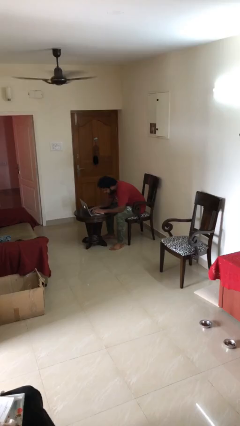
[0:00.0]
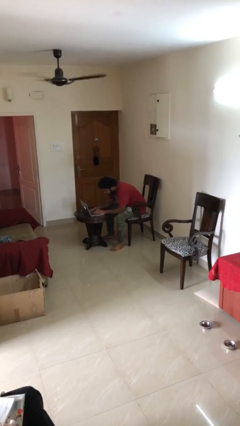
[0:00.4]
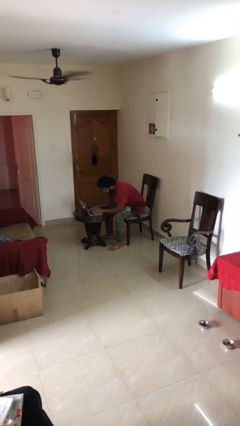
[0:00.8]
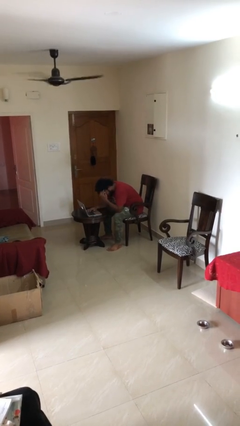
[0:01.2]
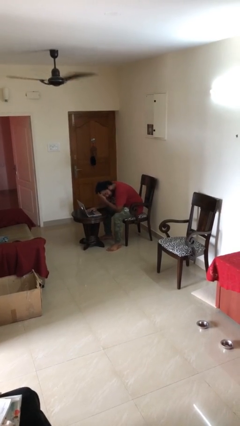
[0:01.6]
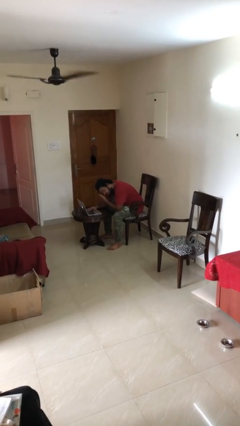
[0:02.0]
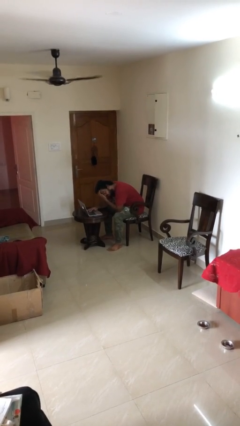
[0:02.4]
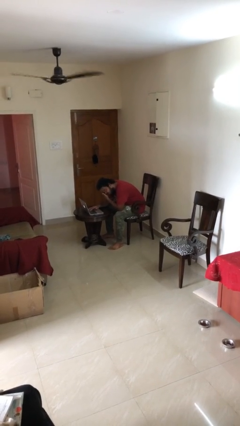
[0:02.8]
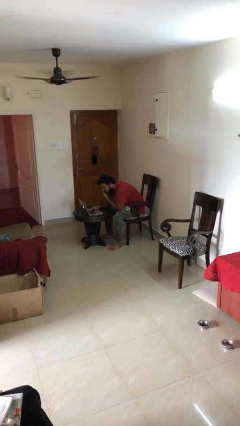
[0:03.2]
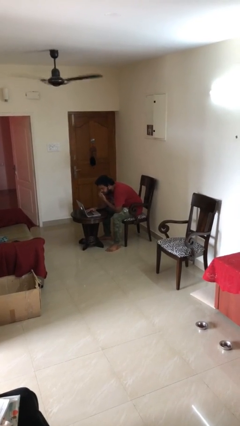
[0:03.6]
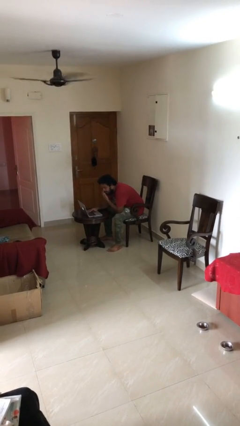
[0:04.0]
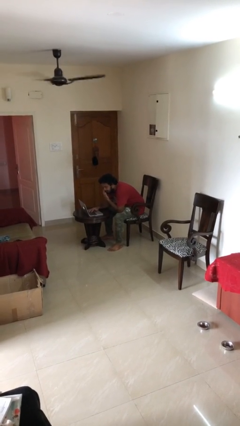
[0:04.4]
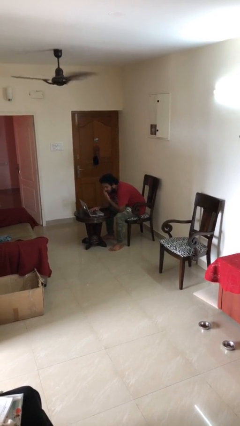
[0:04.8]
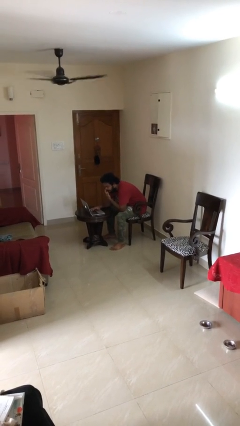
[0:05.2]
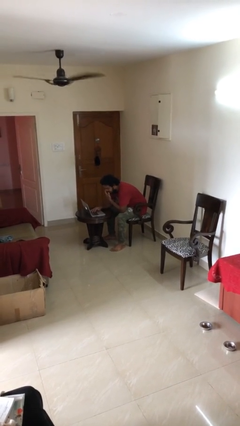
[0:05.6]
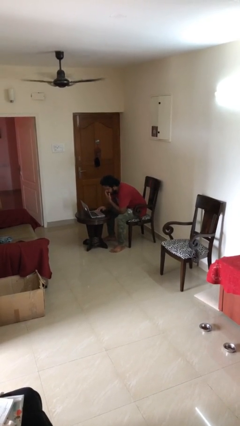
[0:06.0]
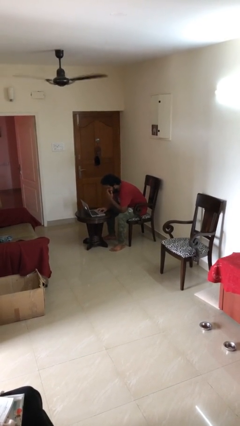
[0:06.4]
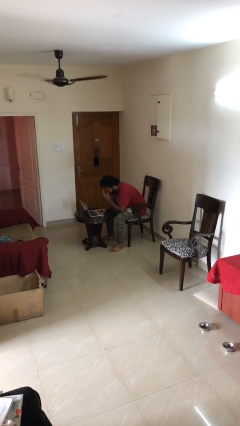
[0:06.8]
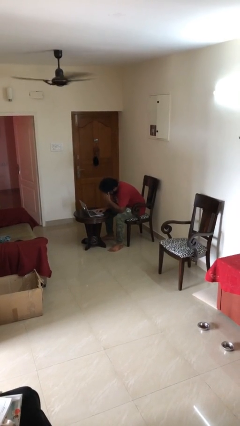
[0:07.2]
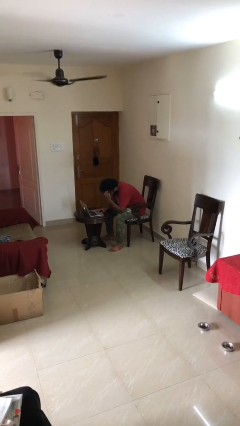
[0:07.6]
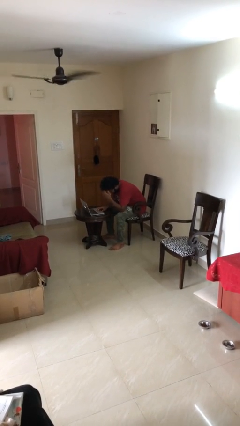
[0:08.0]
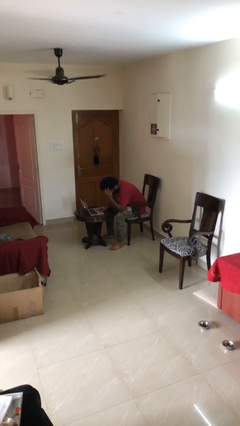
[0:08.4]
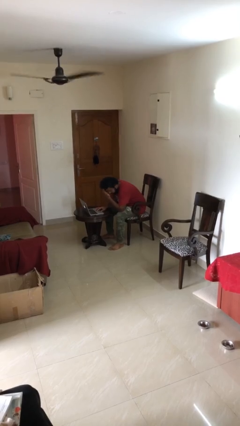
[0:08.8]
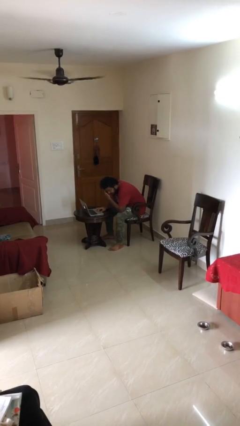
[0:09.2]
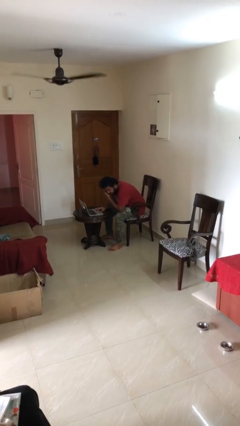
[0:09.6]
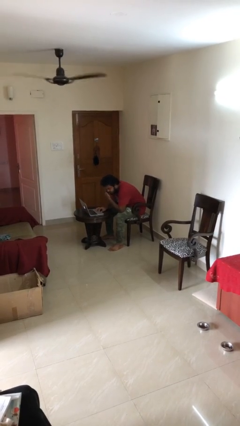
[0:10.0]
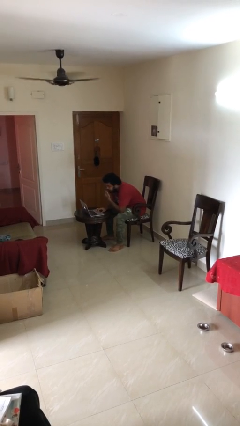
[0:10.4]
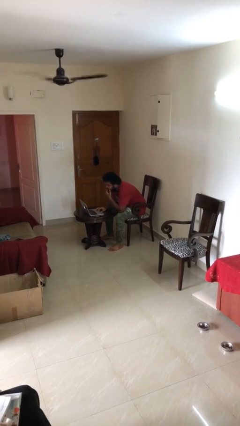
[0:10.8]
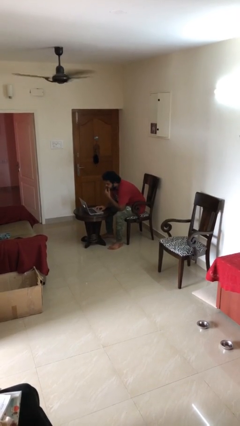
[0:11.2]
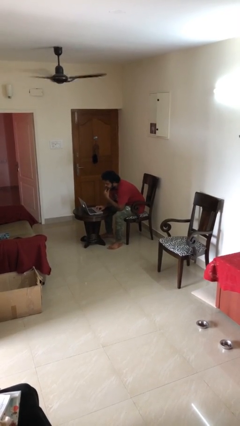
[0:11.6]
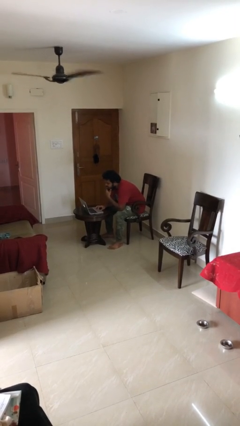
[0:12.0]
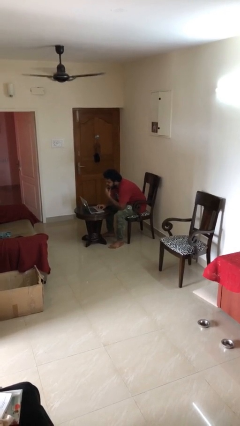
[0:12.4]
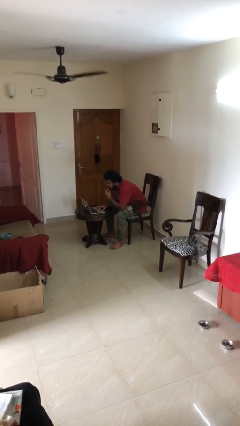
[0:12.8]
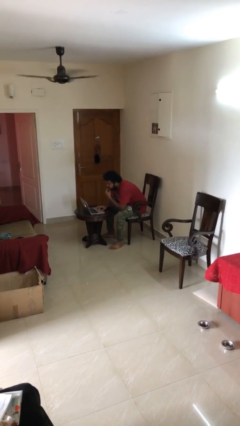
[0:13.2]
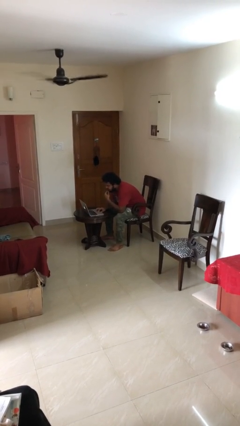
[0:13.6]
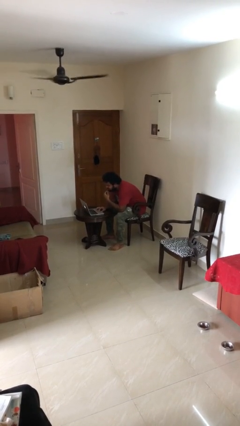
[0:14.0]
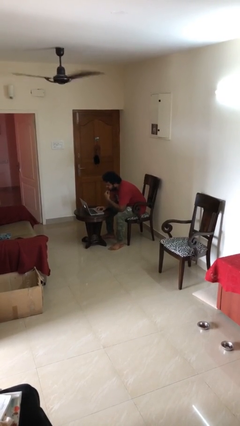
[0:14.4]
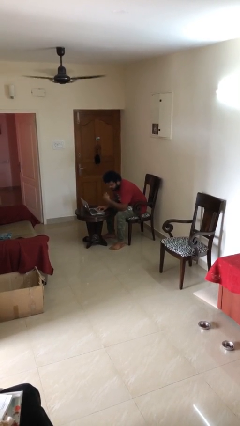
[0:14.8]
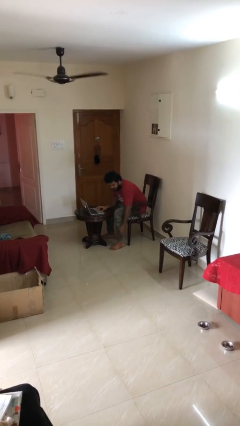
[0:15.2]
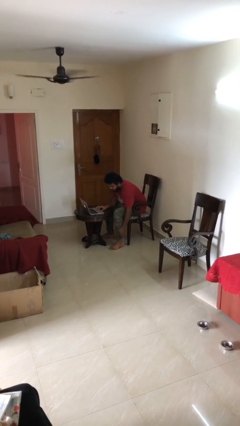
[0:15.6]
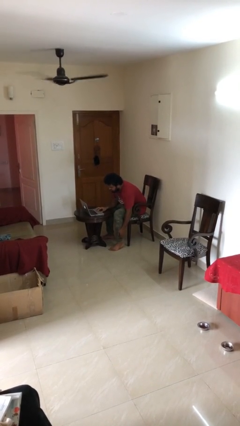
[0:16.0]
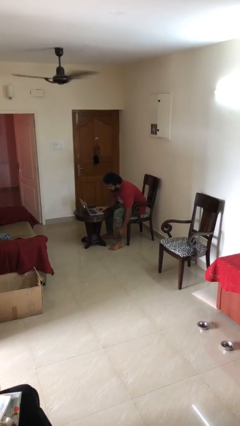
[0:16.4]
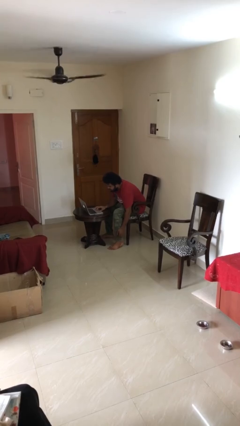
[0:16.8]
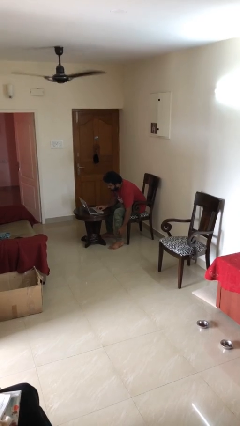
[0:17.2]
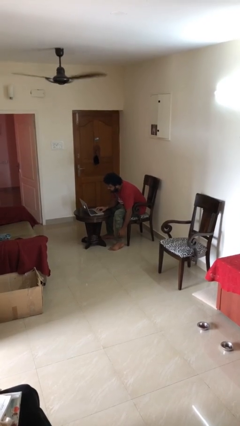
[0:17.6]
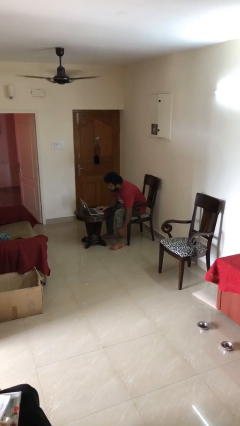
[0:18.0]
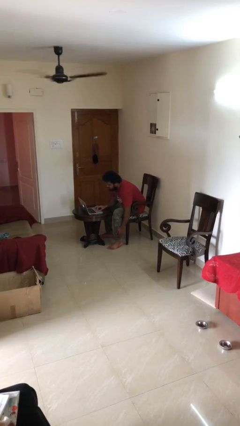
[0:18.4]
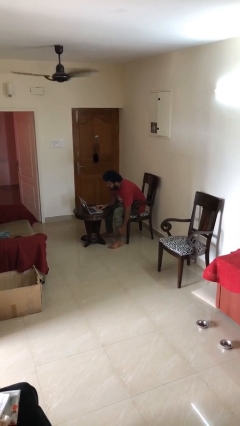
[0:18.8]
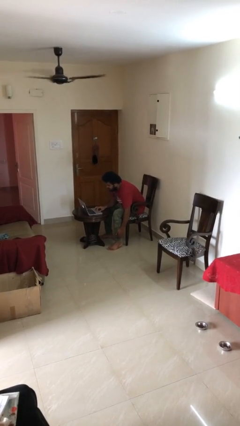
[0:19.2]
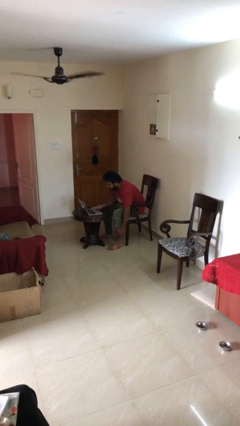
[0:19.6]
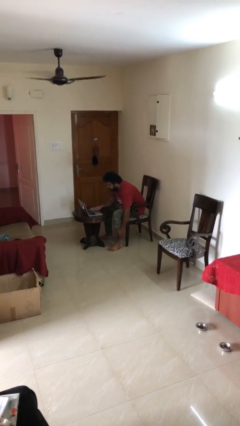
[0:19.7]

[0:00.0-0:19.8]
person interacts with laptop

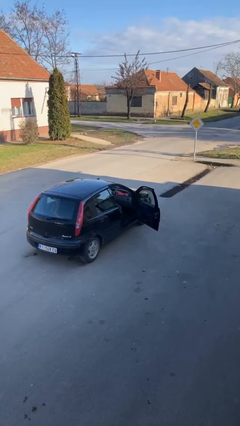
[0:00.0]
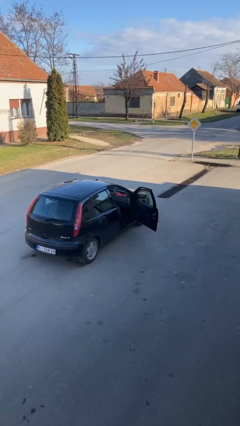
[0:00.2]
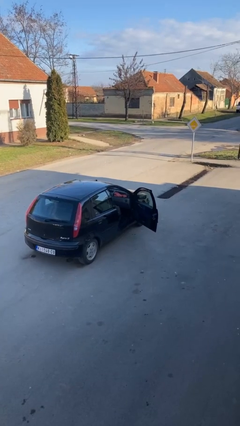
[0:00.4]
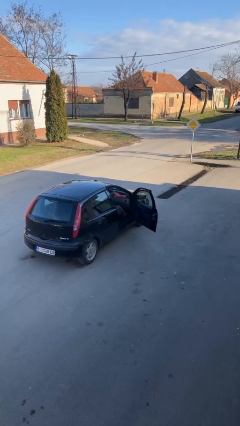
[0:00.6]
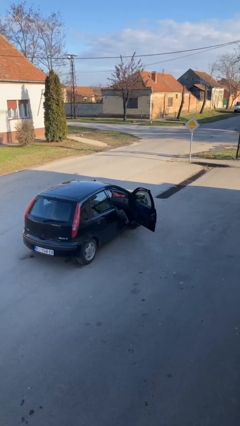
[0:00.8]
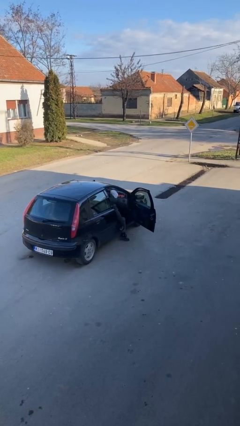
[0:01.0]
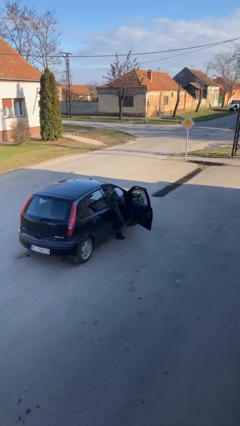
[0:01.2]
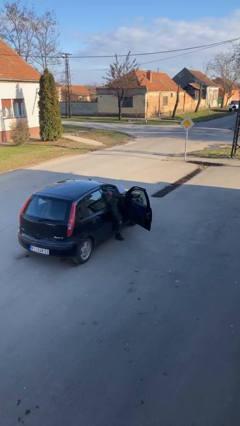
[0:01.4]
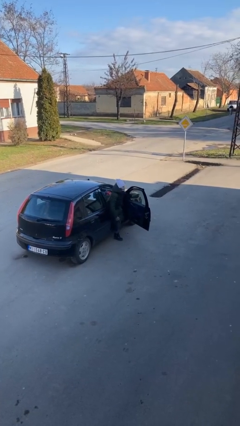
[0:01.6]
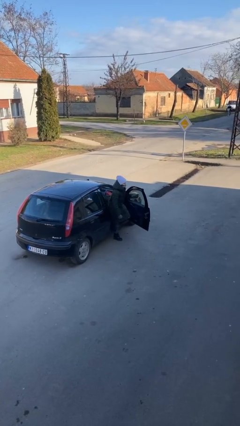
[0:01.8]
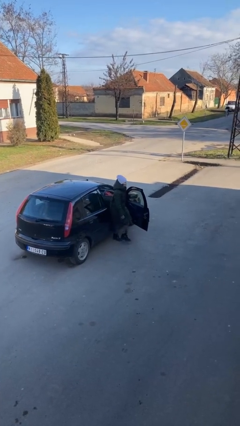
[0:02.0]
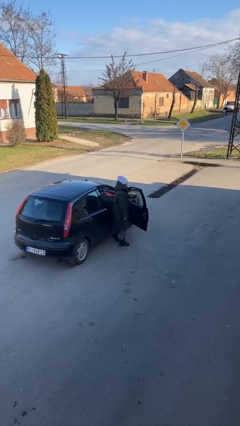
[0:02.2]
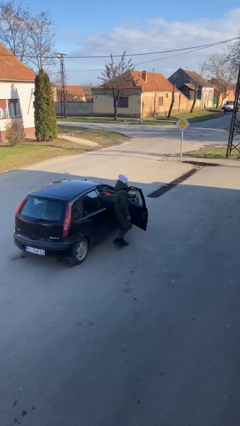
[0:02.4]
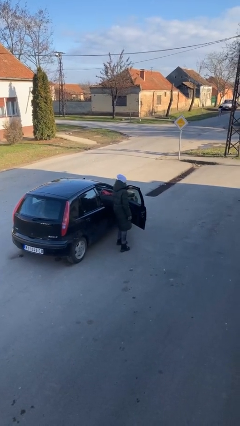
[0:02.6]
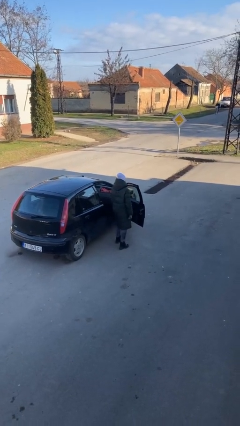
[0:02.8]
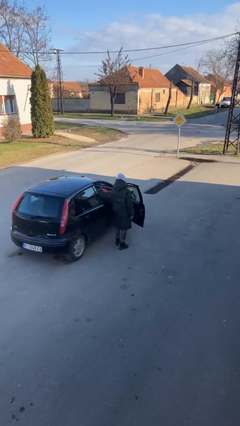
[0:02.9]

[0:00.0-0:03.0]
person exits car

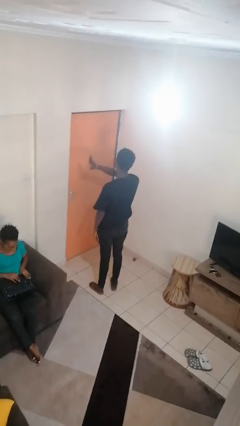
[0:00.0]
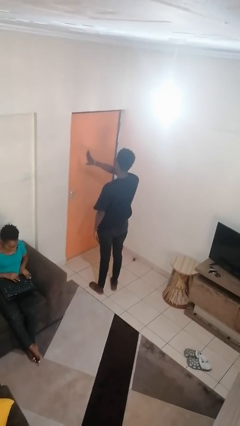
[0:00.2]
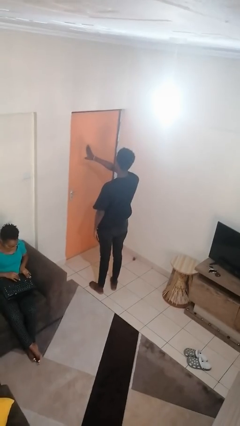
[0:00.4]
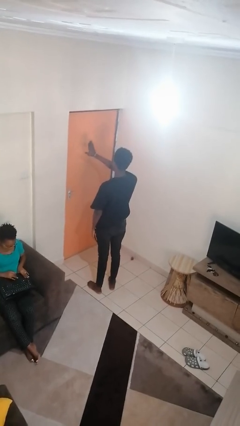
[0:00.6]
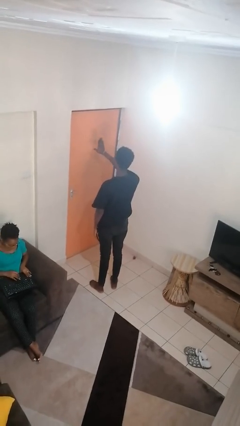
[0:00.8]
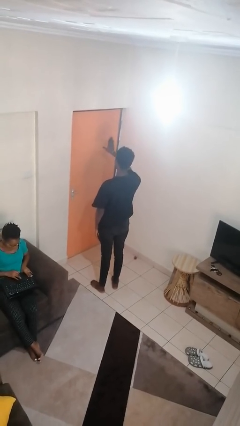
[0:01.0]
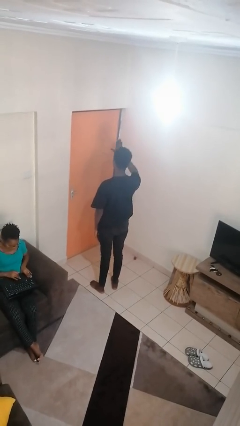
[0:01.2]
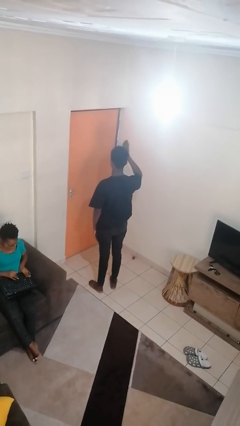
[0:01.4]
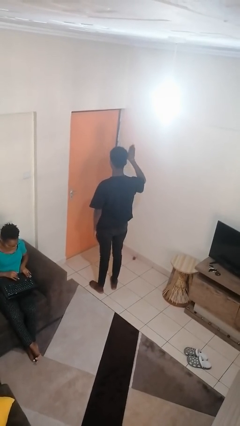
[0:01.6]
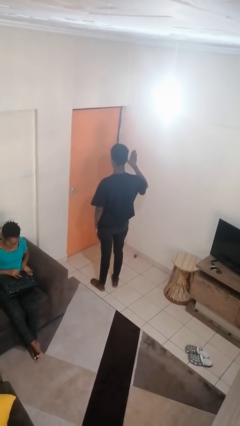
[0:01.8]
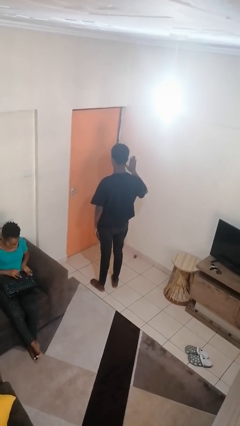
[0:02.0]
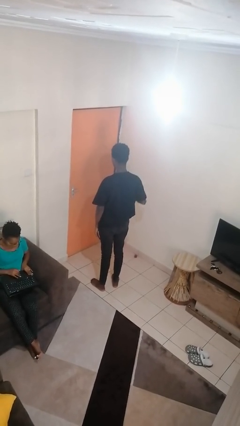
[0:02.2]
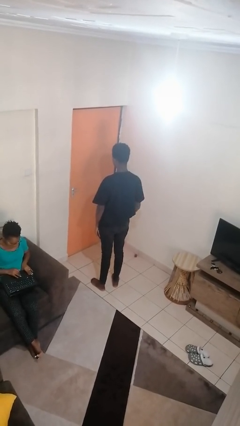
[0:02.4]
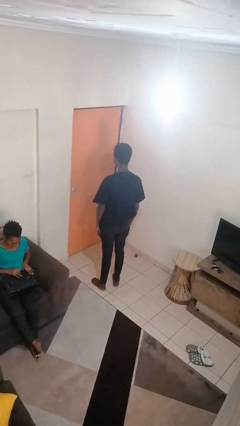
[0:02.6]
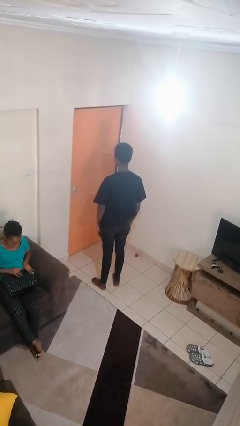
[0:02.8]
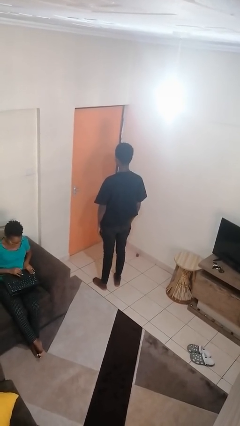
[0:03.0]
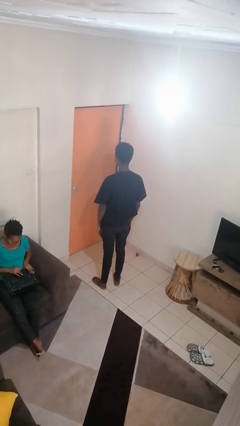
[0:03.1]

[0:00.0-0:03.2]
person gestures swipe right

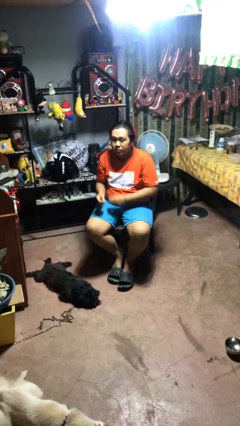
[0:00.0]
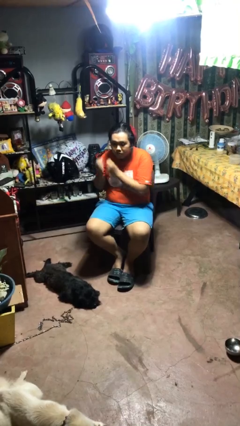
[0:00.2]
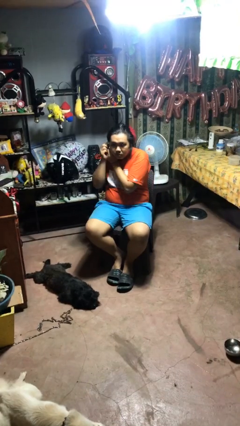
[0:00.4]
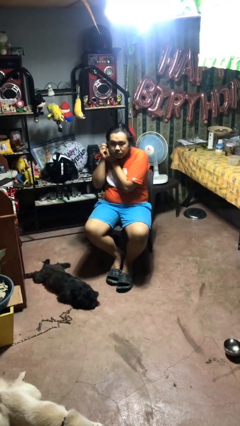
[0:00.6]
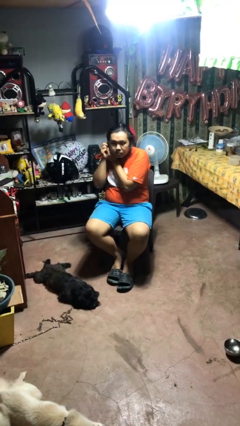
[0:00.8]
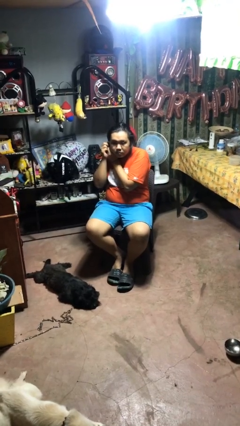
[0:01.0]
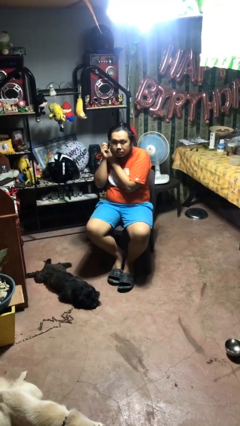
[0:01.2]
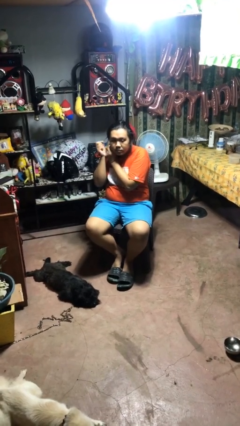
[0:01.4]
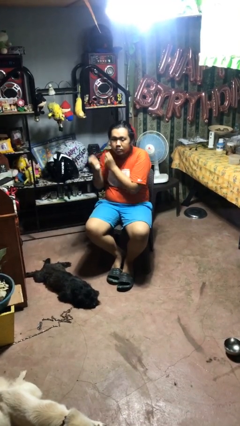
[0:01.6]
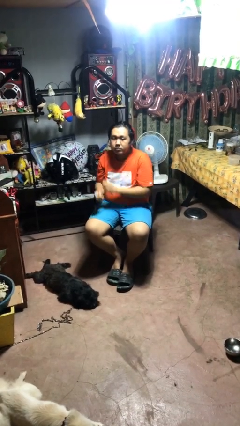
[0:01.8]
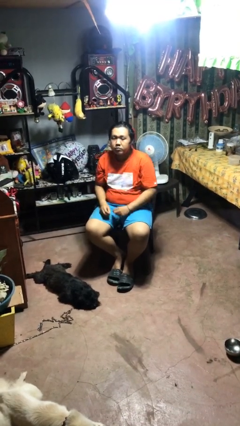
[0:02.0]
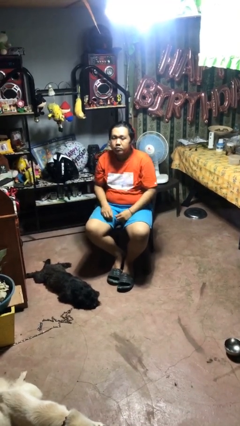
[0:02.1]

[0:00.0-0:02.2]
person takes off earrings
